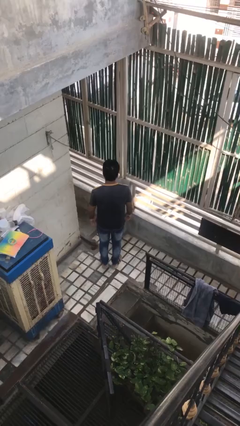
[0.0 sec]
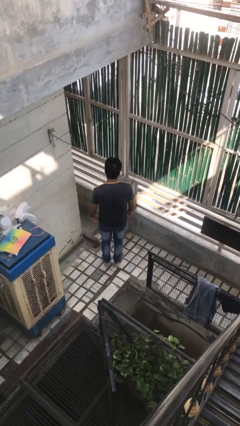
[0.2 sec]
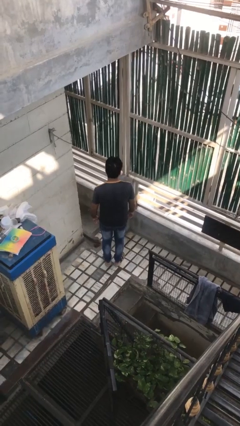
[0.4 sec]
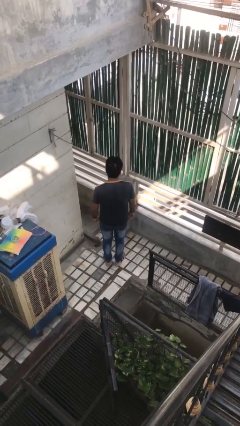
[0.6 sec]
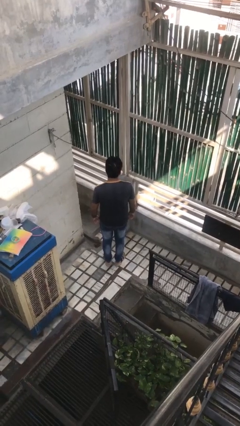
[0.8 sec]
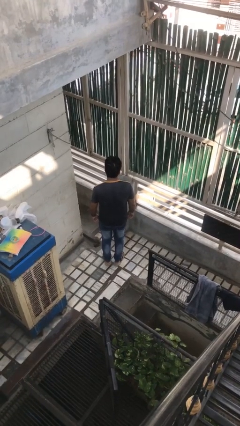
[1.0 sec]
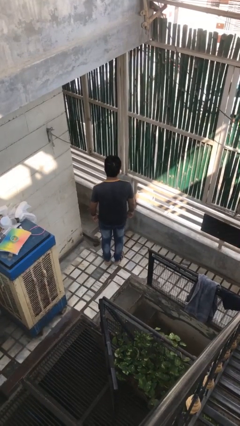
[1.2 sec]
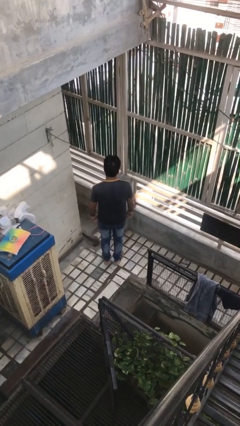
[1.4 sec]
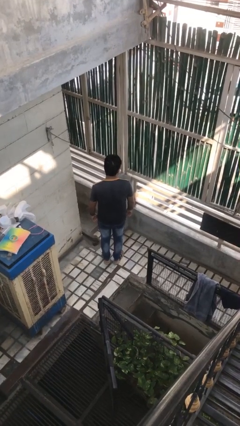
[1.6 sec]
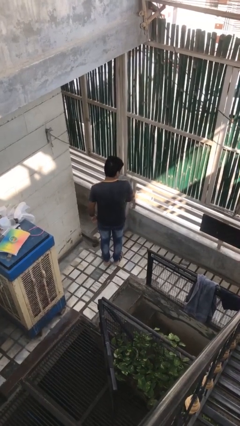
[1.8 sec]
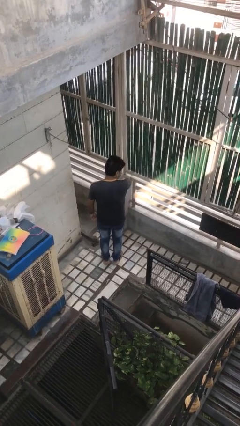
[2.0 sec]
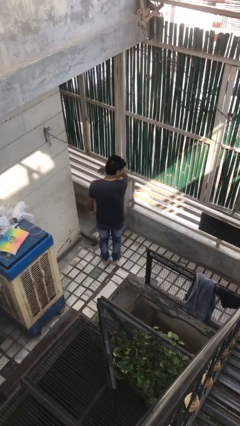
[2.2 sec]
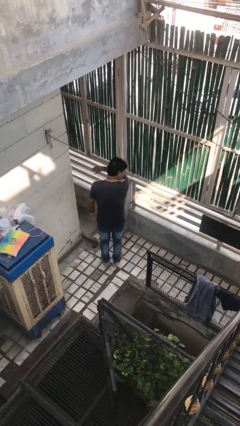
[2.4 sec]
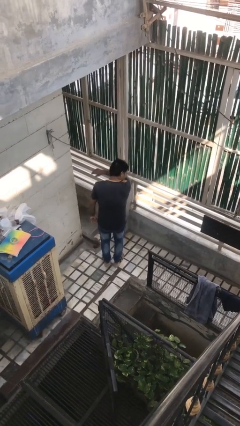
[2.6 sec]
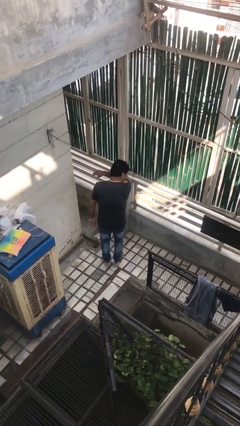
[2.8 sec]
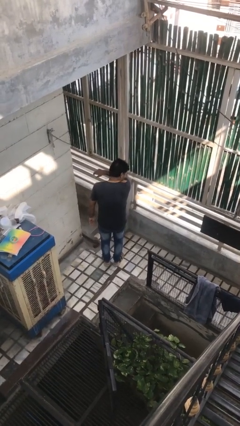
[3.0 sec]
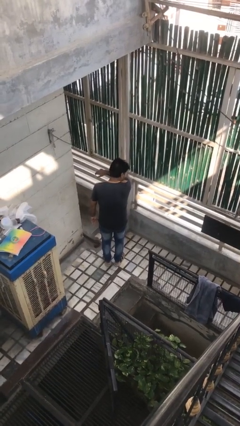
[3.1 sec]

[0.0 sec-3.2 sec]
person sneezes into arm

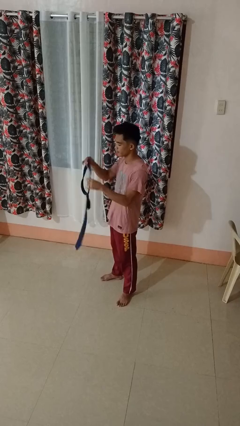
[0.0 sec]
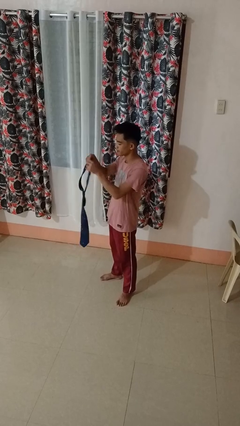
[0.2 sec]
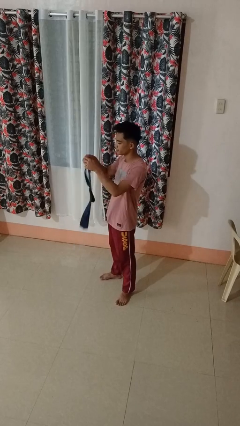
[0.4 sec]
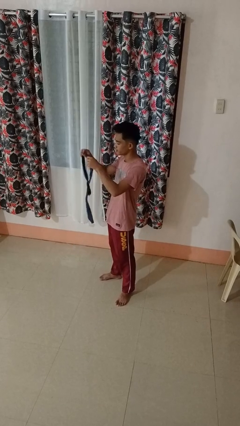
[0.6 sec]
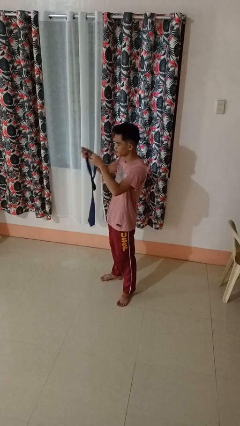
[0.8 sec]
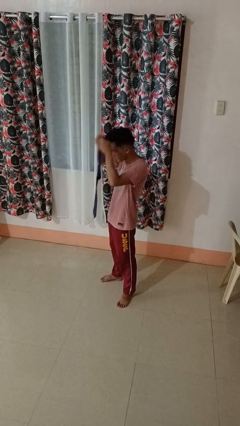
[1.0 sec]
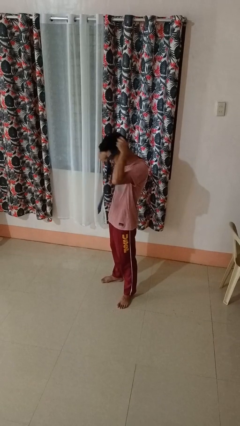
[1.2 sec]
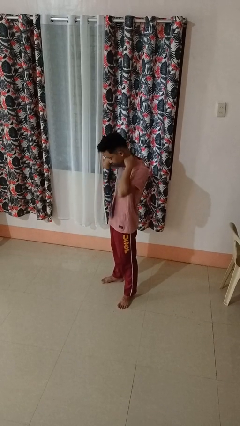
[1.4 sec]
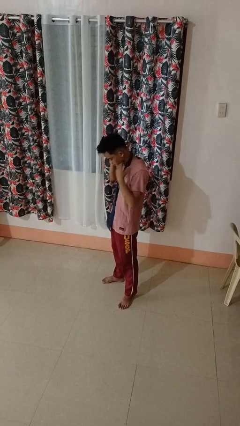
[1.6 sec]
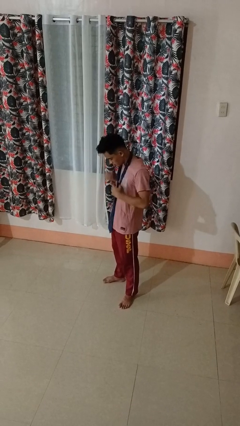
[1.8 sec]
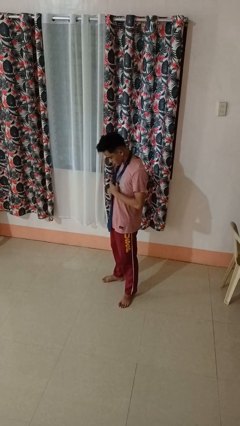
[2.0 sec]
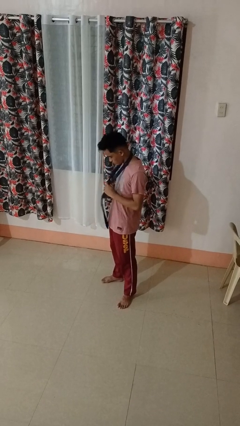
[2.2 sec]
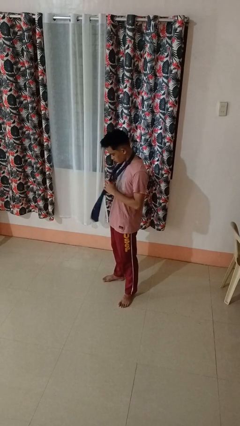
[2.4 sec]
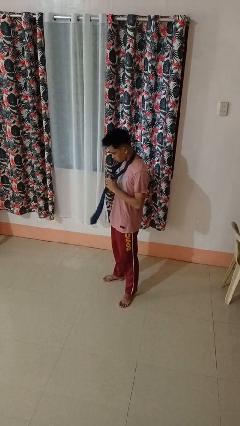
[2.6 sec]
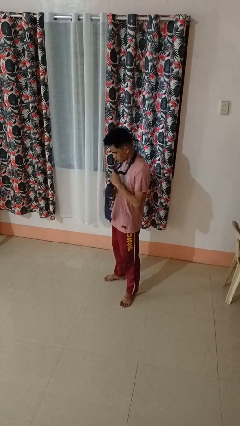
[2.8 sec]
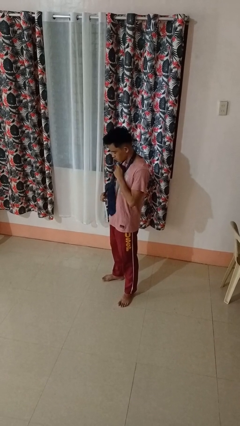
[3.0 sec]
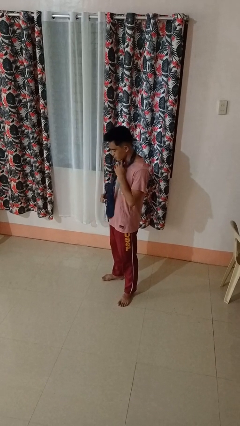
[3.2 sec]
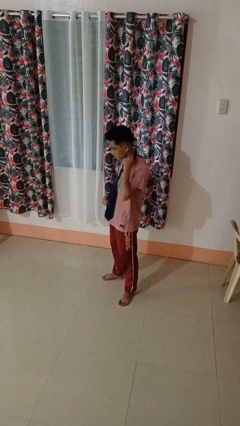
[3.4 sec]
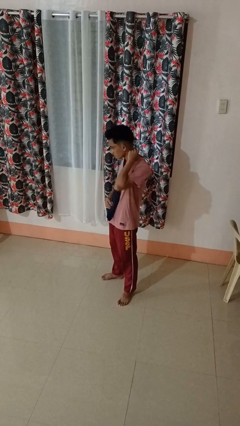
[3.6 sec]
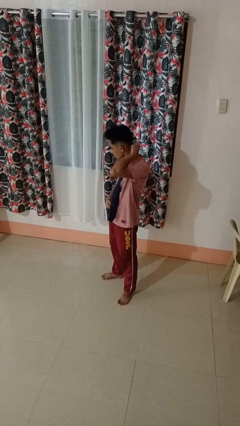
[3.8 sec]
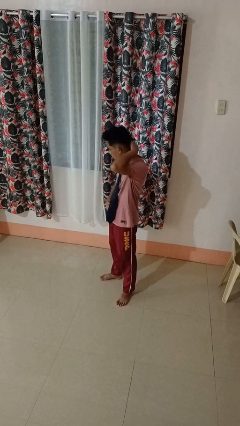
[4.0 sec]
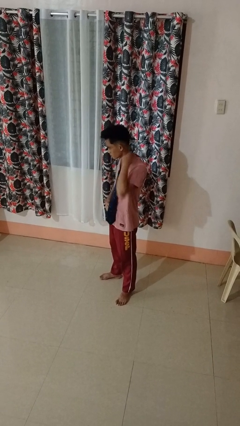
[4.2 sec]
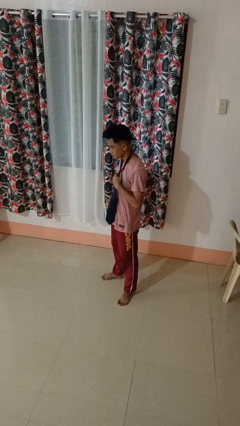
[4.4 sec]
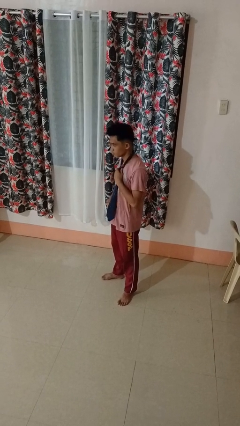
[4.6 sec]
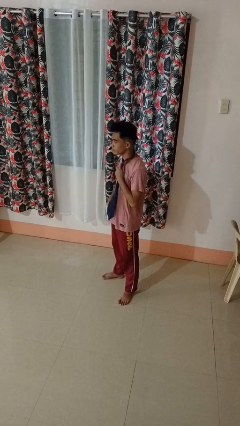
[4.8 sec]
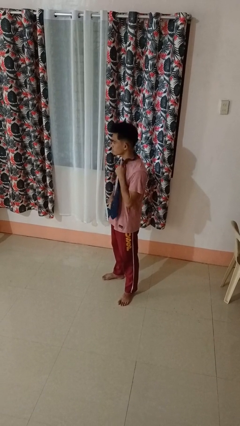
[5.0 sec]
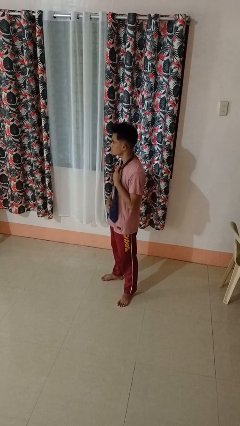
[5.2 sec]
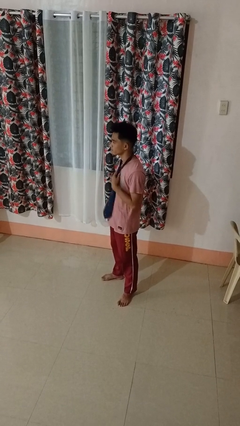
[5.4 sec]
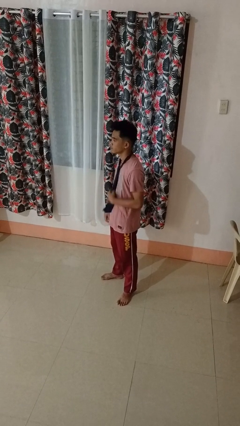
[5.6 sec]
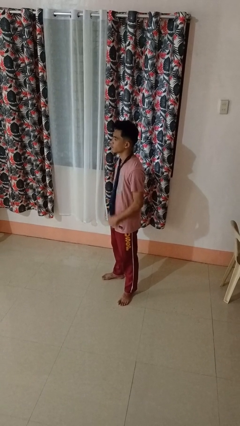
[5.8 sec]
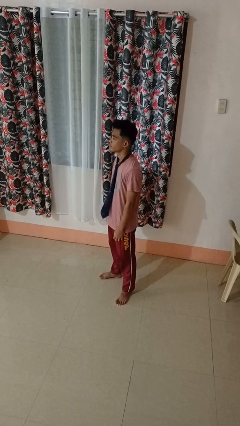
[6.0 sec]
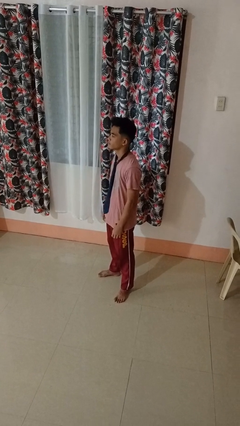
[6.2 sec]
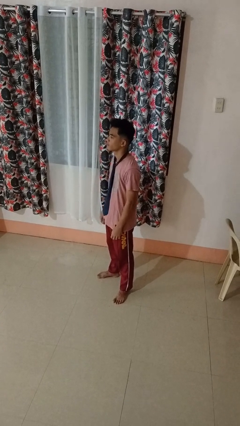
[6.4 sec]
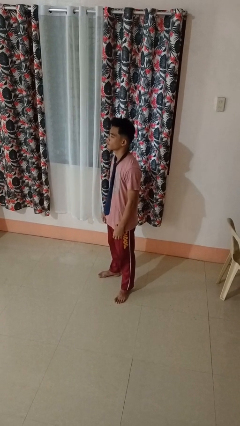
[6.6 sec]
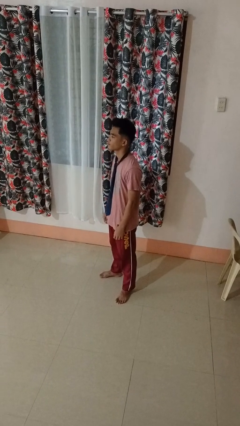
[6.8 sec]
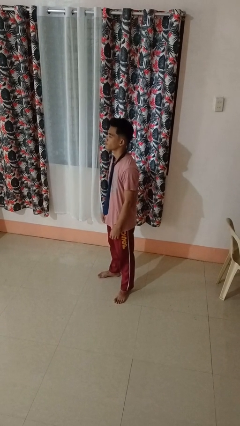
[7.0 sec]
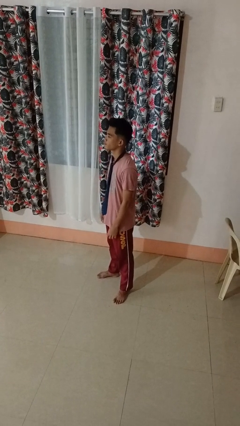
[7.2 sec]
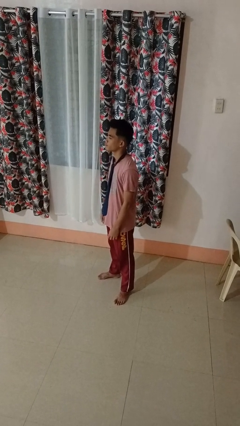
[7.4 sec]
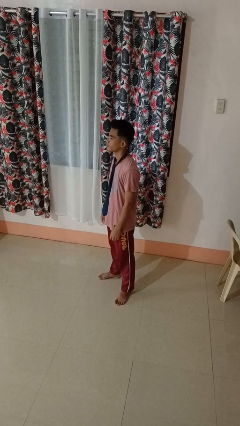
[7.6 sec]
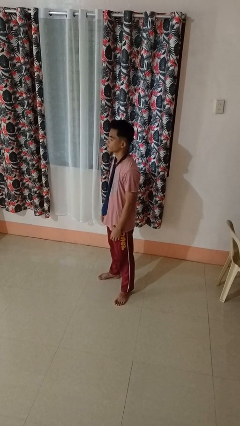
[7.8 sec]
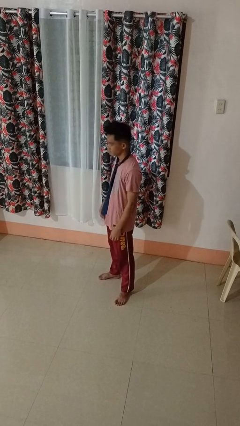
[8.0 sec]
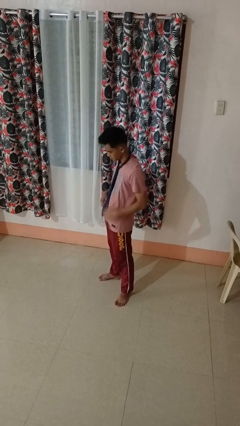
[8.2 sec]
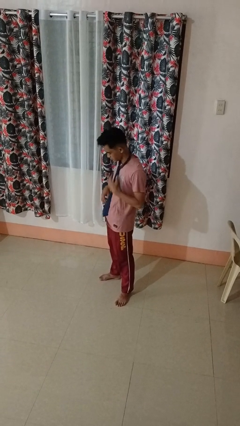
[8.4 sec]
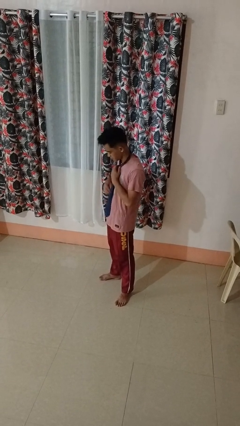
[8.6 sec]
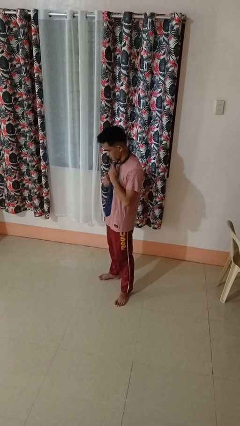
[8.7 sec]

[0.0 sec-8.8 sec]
person puts on necktie

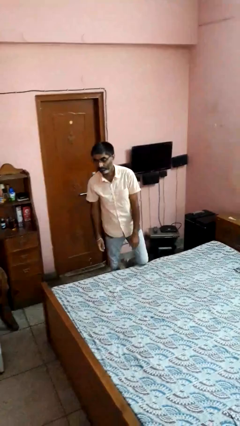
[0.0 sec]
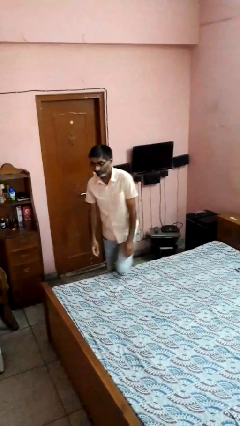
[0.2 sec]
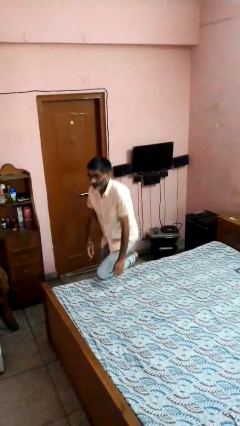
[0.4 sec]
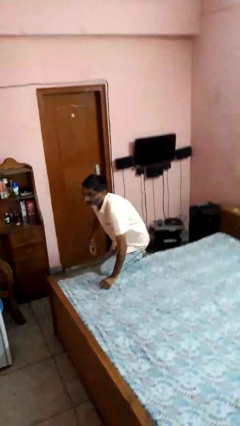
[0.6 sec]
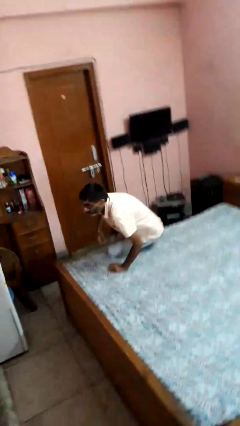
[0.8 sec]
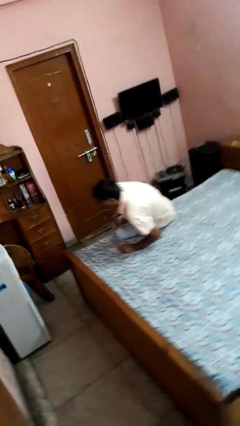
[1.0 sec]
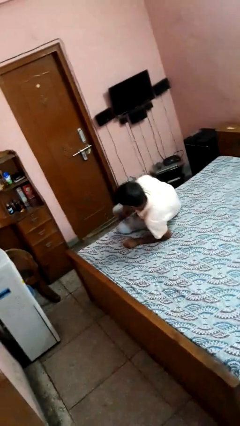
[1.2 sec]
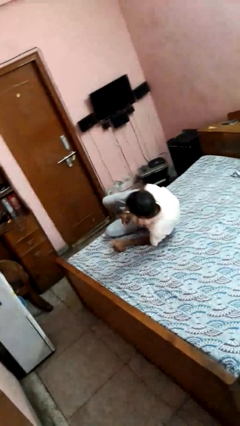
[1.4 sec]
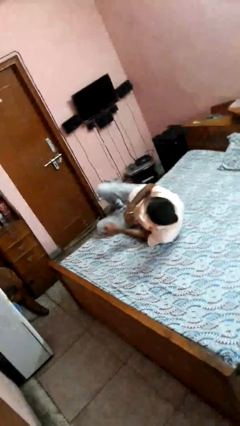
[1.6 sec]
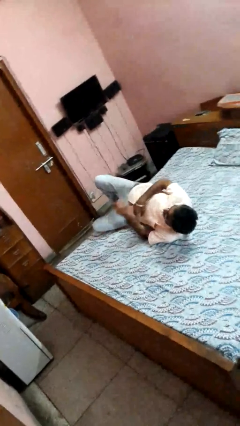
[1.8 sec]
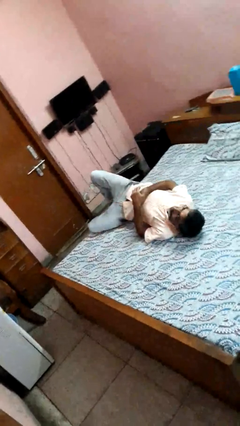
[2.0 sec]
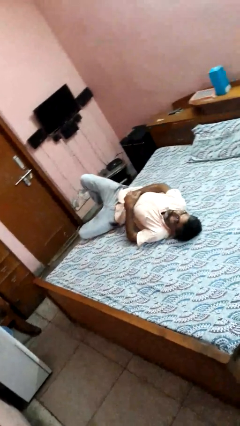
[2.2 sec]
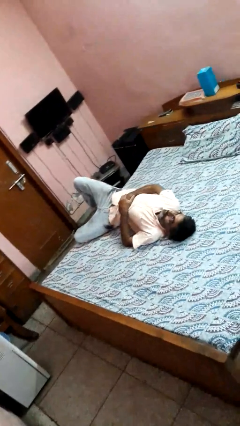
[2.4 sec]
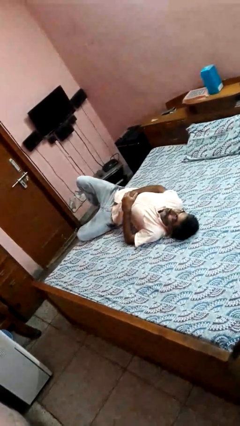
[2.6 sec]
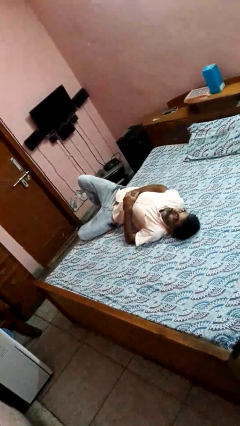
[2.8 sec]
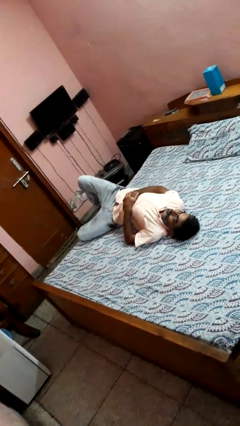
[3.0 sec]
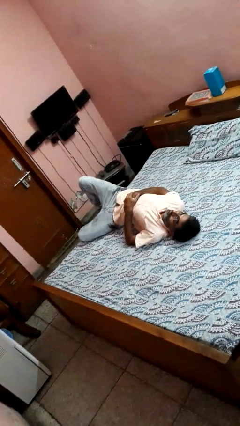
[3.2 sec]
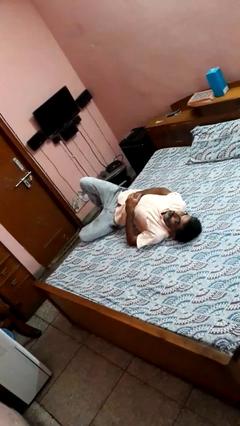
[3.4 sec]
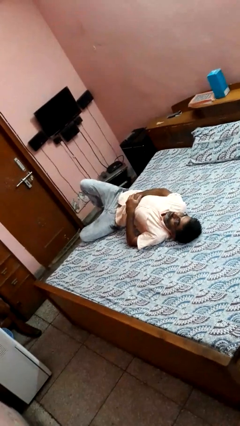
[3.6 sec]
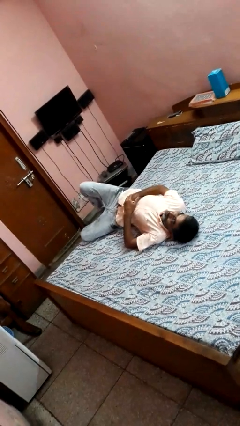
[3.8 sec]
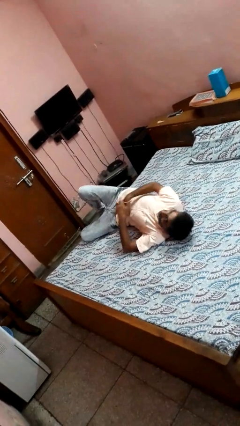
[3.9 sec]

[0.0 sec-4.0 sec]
person lies down on bed

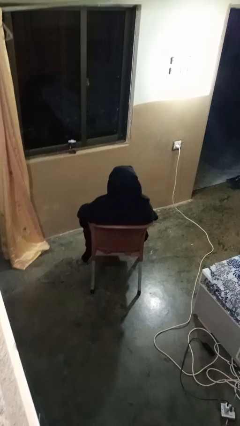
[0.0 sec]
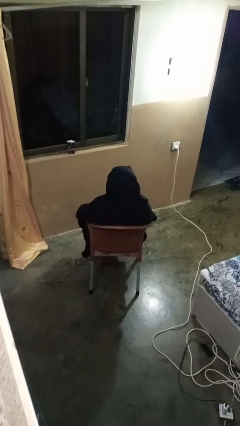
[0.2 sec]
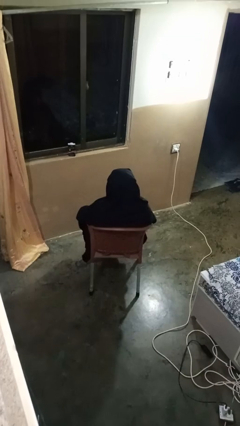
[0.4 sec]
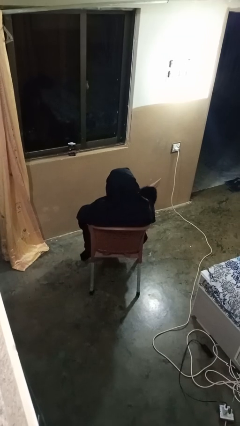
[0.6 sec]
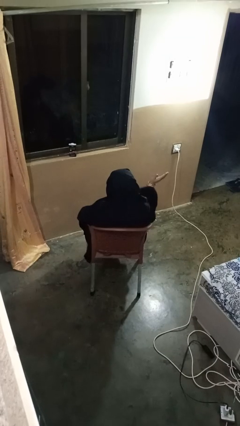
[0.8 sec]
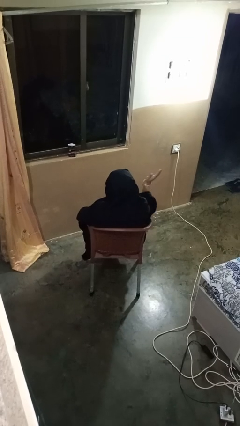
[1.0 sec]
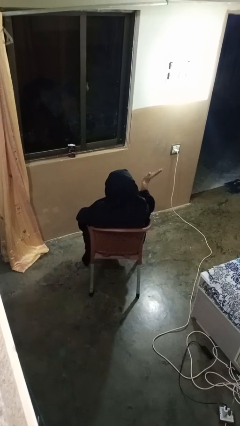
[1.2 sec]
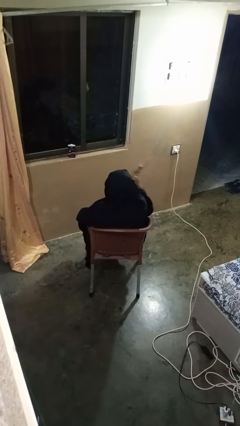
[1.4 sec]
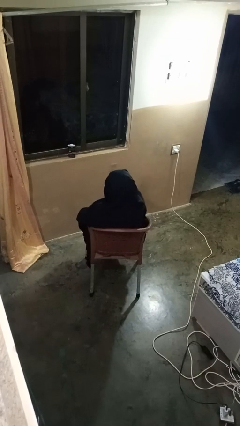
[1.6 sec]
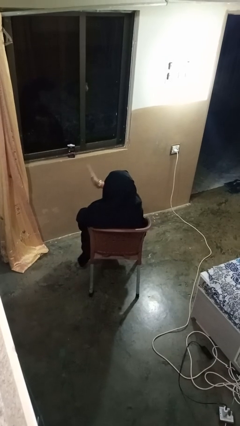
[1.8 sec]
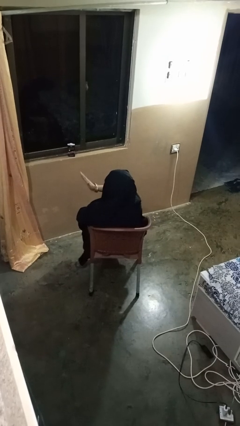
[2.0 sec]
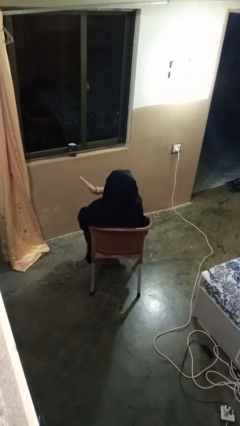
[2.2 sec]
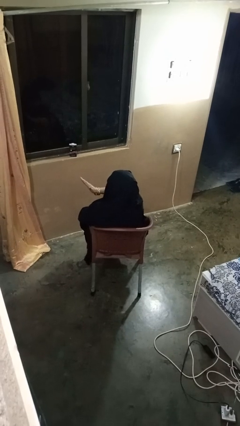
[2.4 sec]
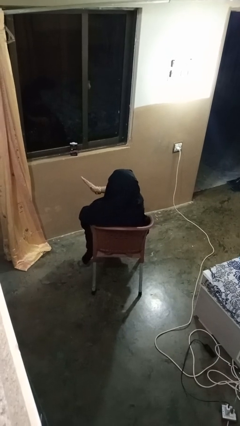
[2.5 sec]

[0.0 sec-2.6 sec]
person gestures swipe left
